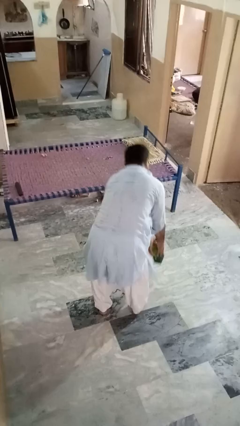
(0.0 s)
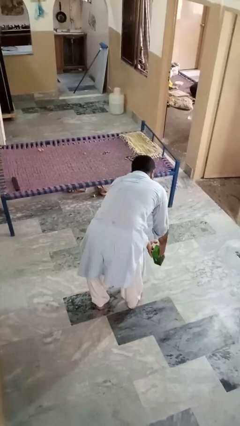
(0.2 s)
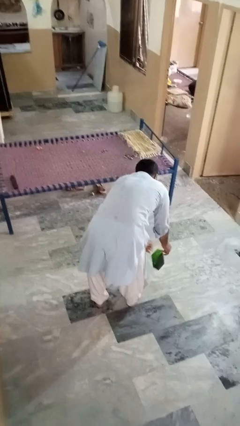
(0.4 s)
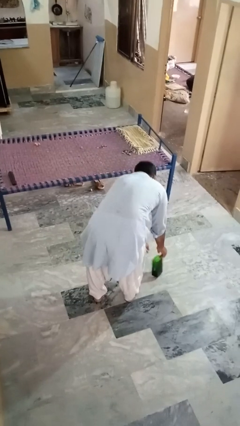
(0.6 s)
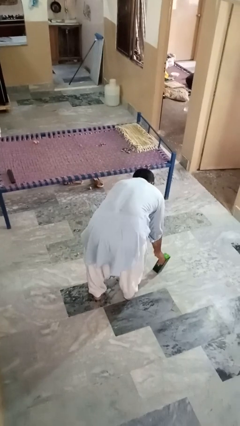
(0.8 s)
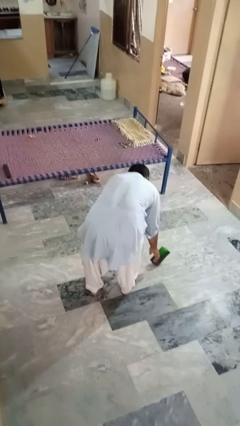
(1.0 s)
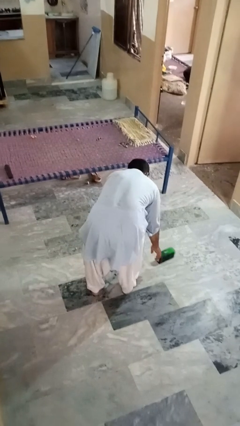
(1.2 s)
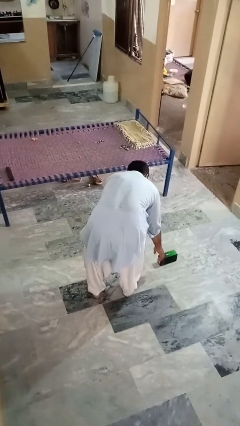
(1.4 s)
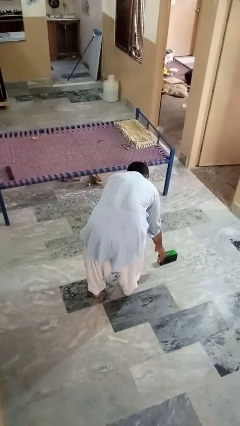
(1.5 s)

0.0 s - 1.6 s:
person catches dropped object

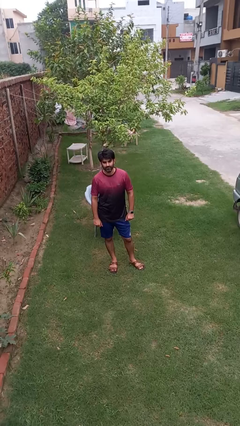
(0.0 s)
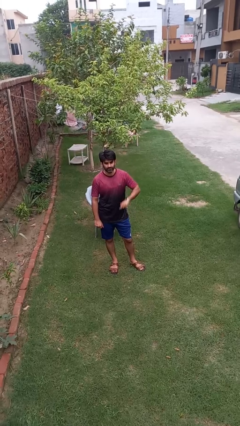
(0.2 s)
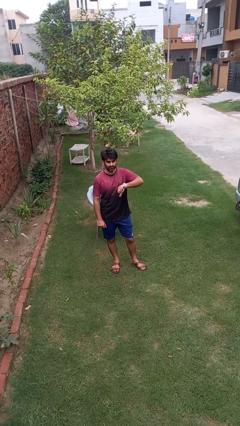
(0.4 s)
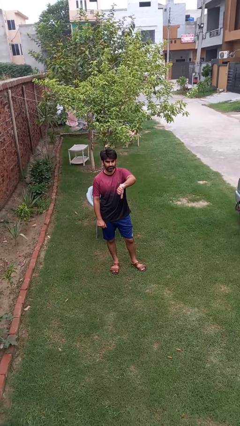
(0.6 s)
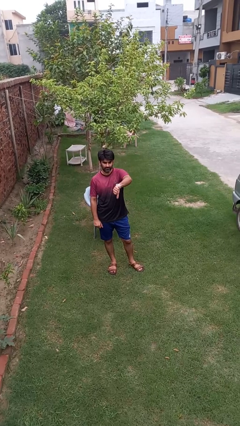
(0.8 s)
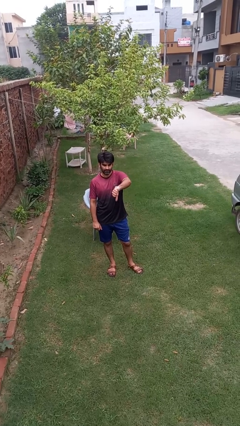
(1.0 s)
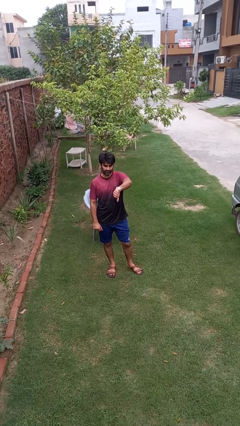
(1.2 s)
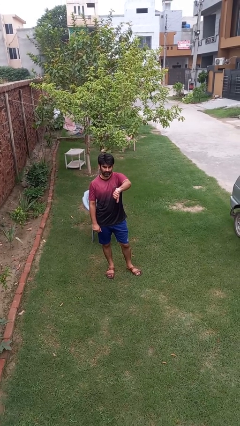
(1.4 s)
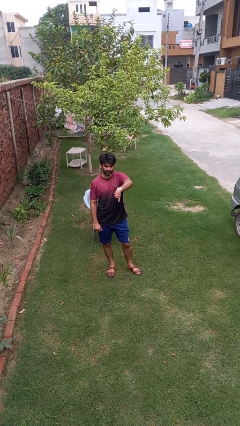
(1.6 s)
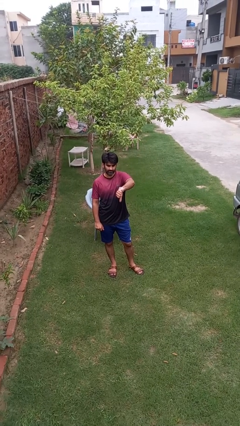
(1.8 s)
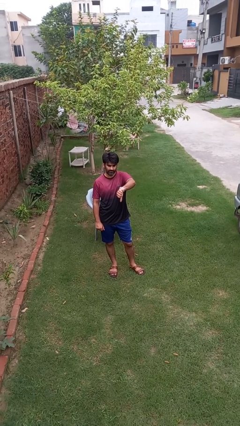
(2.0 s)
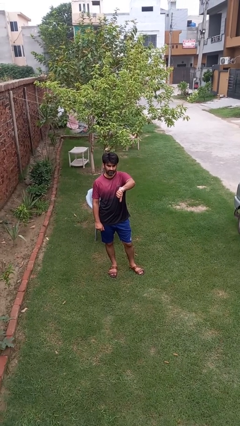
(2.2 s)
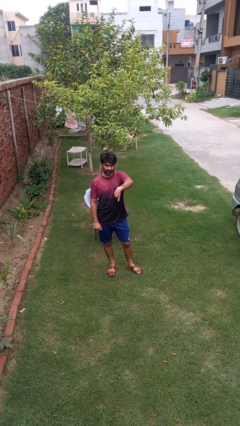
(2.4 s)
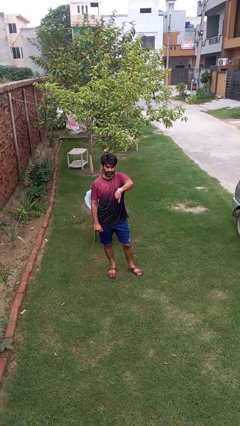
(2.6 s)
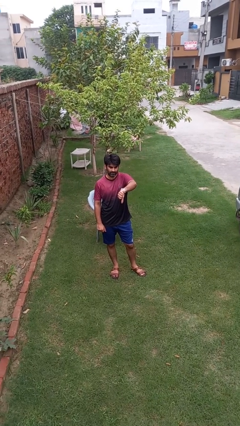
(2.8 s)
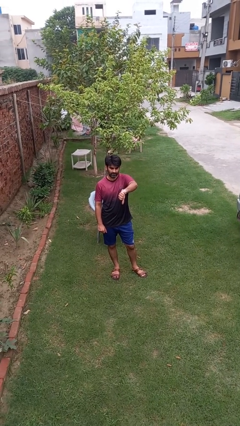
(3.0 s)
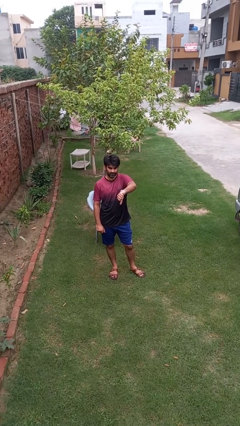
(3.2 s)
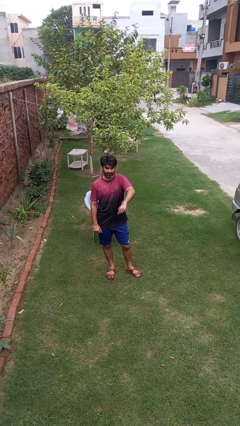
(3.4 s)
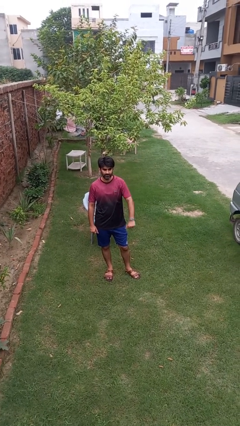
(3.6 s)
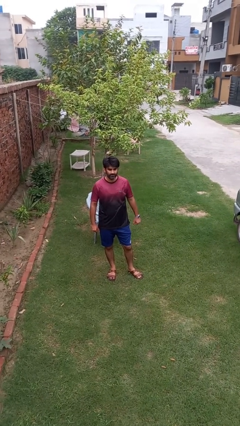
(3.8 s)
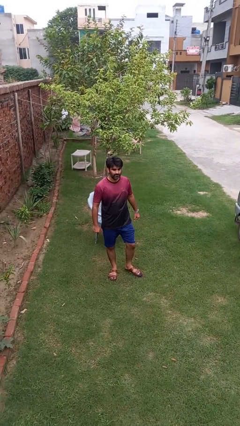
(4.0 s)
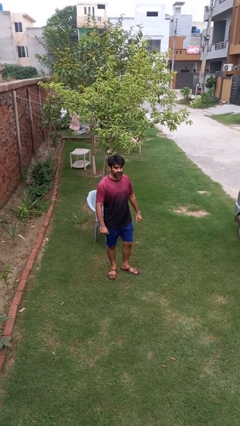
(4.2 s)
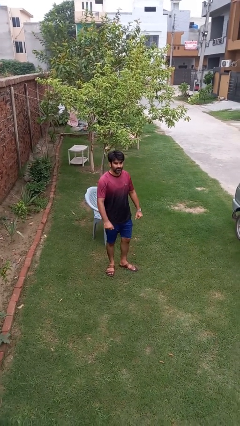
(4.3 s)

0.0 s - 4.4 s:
person gestures thumbs down

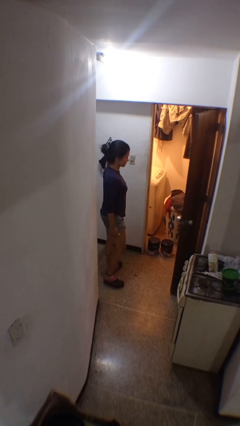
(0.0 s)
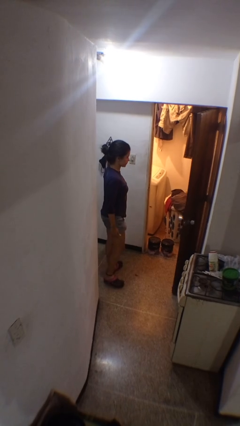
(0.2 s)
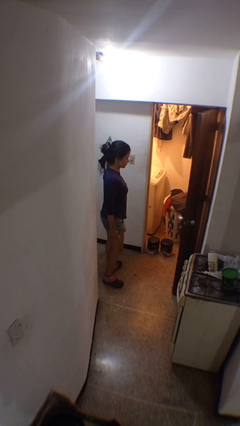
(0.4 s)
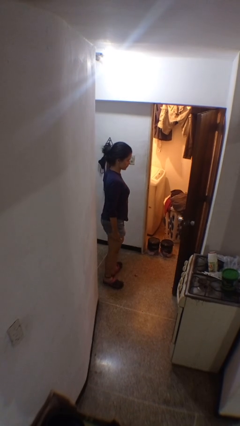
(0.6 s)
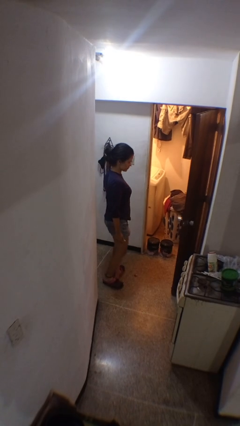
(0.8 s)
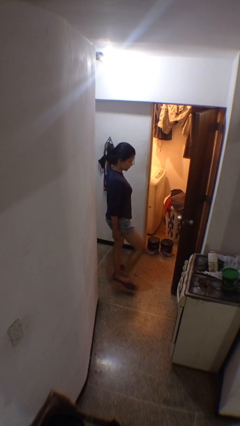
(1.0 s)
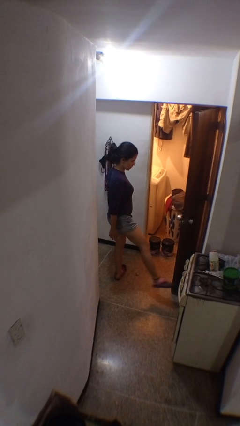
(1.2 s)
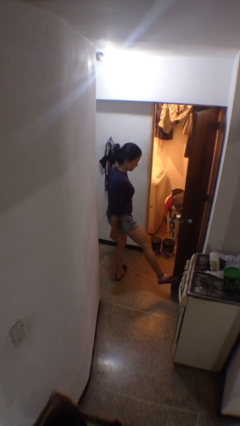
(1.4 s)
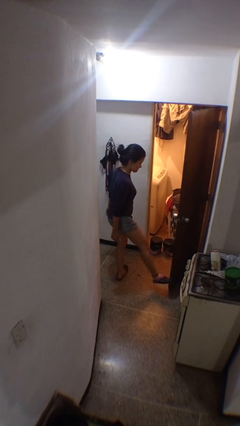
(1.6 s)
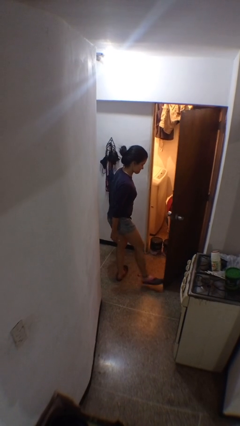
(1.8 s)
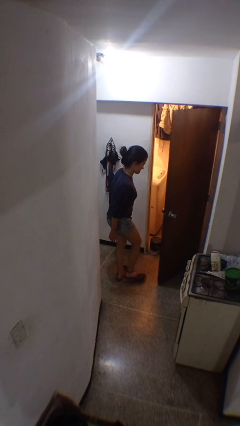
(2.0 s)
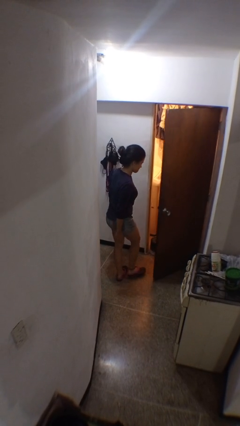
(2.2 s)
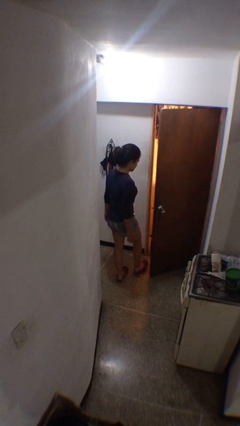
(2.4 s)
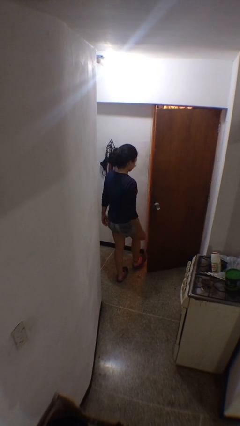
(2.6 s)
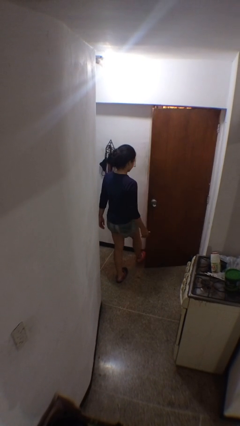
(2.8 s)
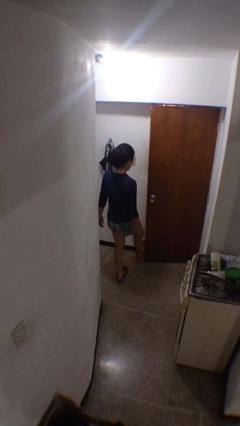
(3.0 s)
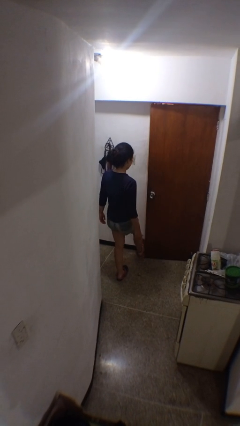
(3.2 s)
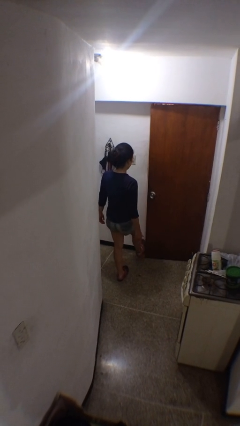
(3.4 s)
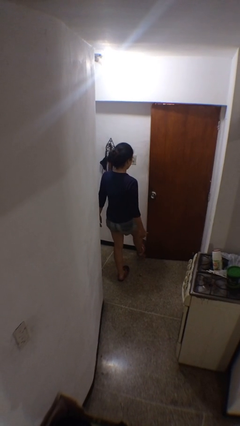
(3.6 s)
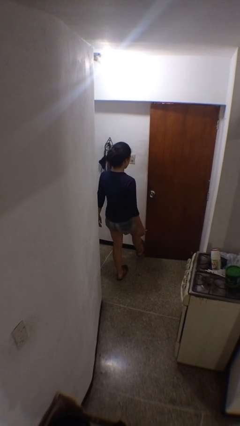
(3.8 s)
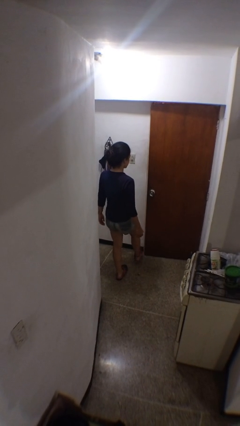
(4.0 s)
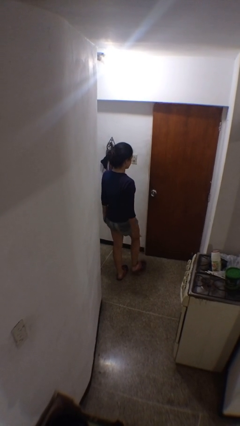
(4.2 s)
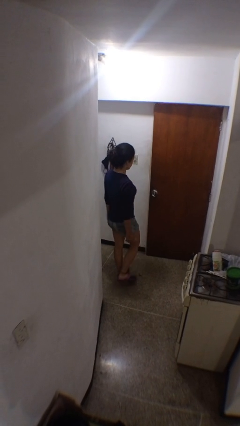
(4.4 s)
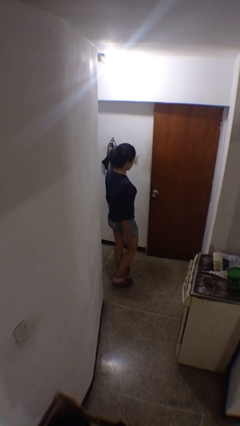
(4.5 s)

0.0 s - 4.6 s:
person closes door with foot

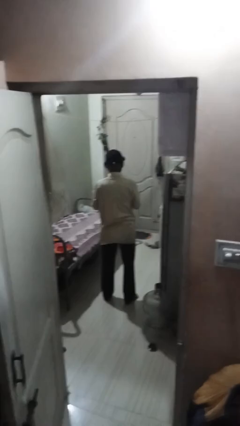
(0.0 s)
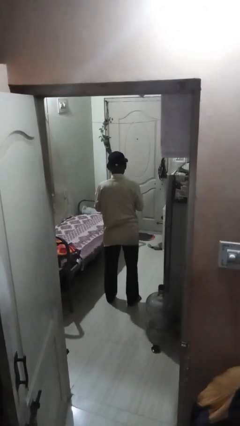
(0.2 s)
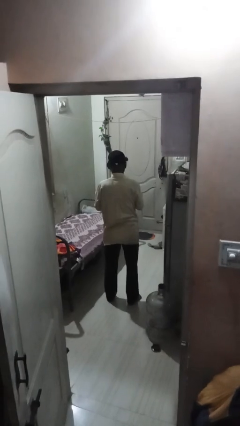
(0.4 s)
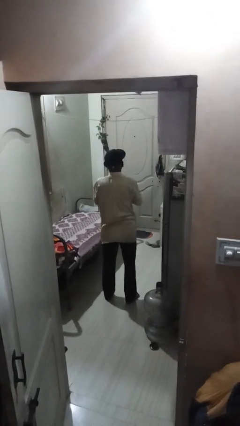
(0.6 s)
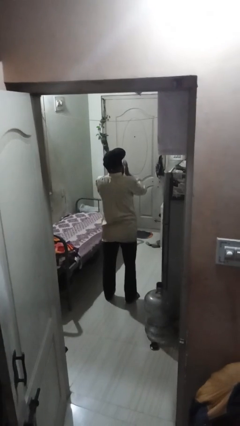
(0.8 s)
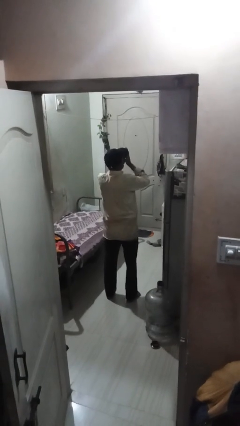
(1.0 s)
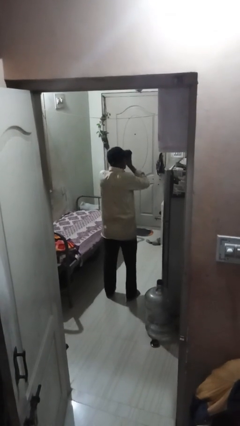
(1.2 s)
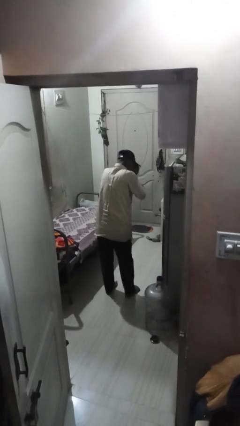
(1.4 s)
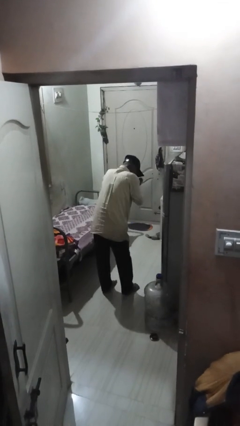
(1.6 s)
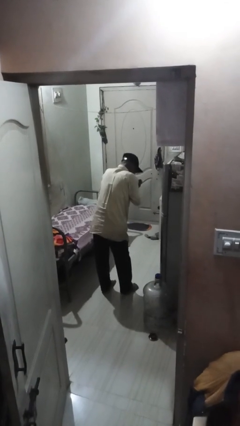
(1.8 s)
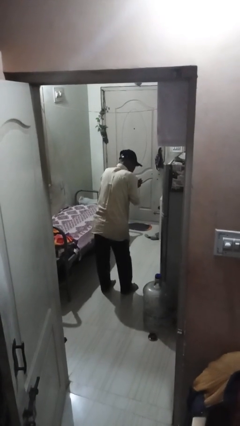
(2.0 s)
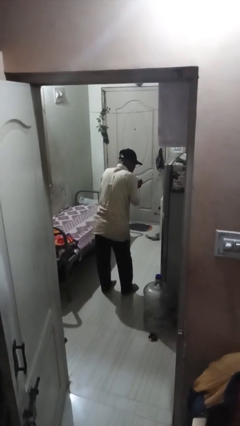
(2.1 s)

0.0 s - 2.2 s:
person sneezes into hand

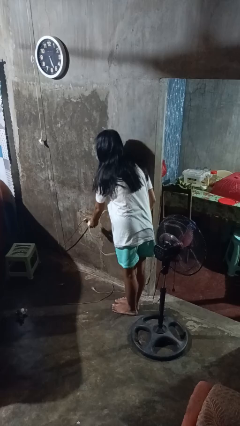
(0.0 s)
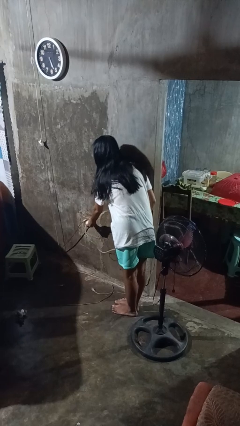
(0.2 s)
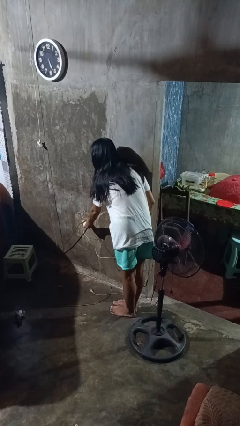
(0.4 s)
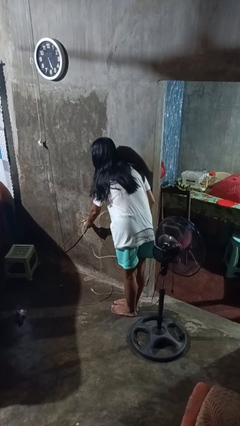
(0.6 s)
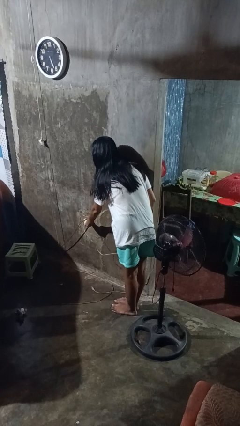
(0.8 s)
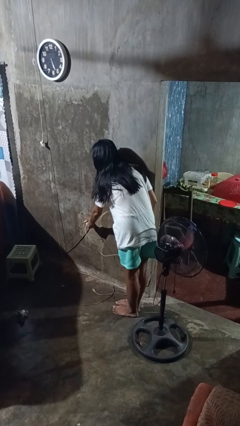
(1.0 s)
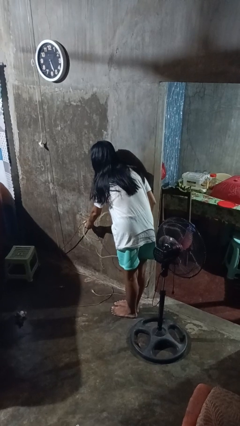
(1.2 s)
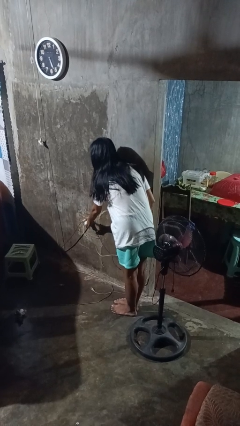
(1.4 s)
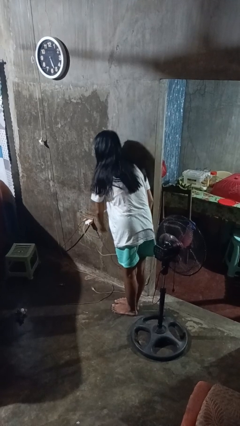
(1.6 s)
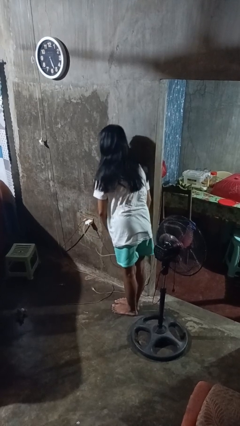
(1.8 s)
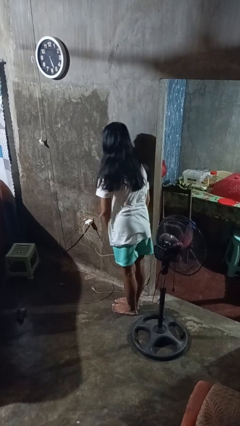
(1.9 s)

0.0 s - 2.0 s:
person plugs into electrical socket

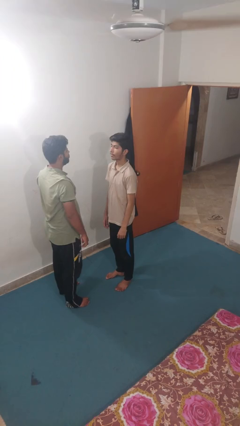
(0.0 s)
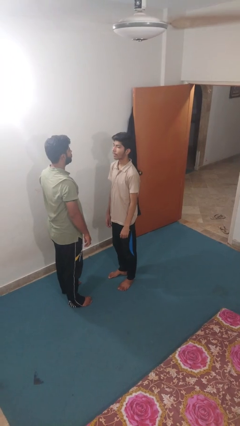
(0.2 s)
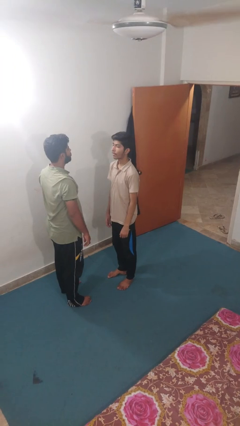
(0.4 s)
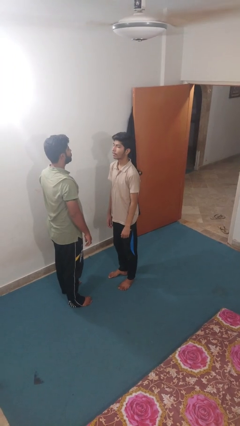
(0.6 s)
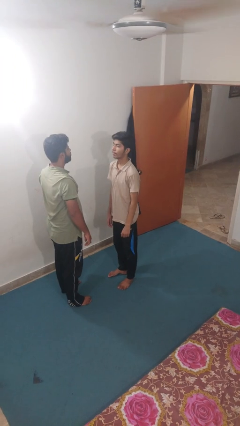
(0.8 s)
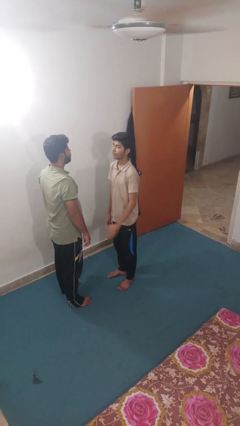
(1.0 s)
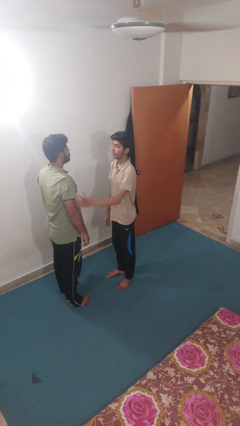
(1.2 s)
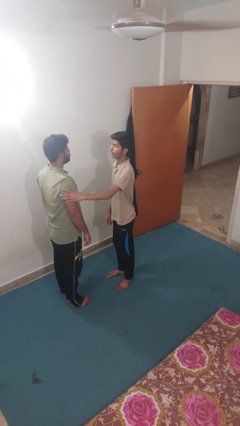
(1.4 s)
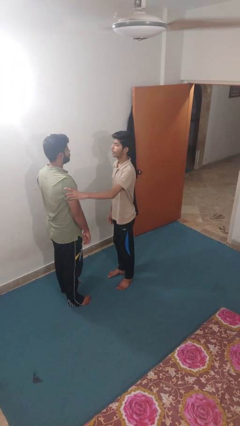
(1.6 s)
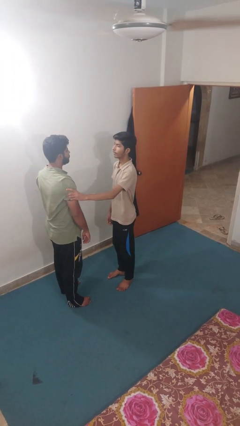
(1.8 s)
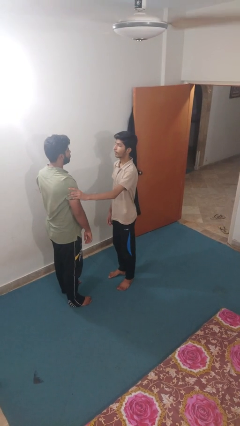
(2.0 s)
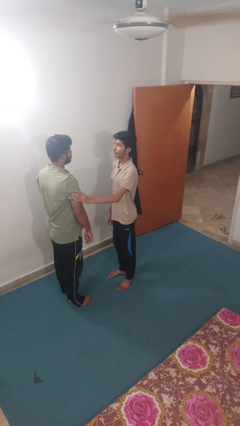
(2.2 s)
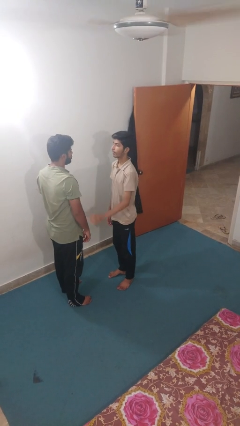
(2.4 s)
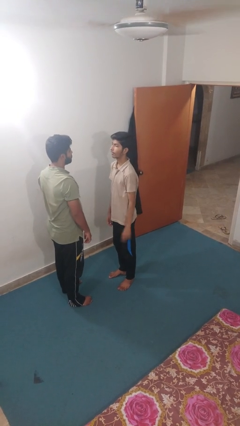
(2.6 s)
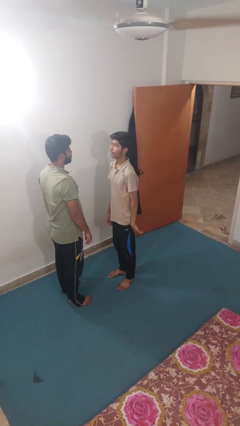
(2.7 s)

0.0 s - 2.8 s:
person grabs person by bicep

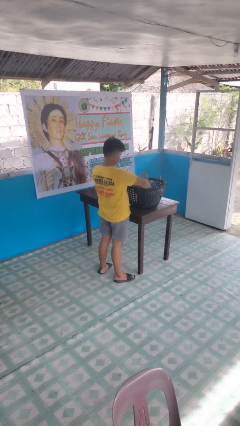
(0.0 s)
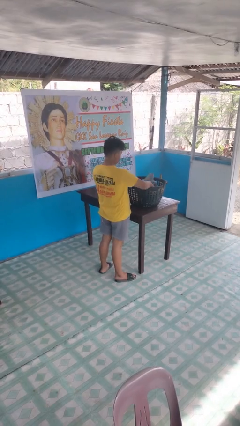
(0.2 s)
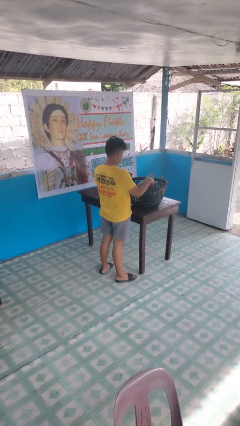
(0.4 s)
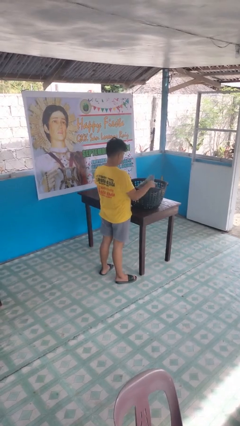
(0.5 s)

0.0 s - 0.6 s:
person puts object into basket
